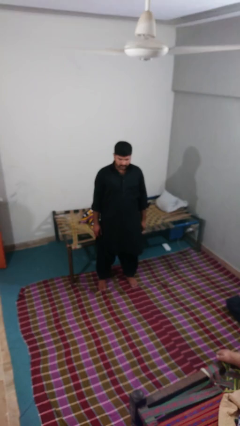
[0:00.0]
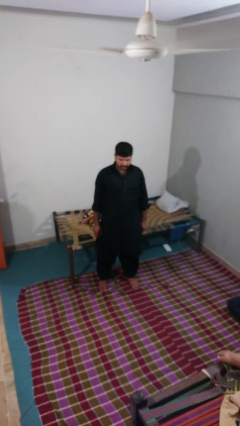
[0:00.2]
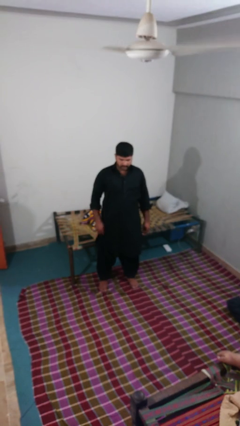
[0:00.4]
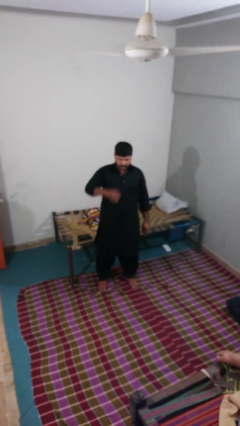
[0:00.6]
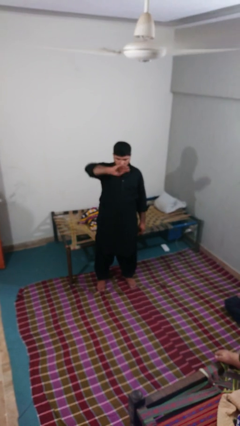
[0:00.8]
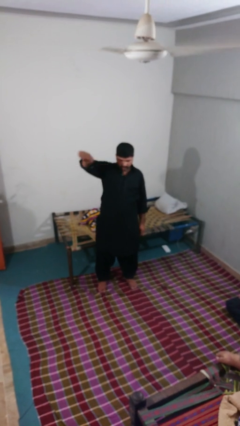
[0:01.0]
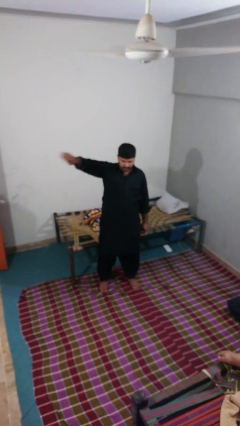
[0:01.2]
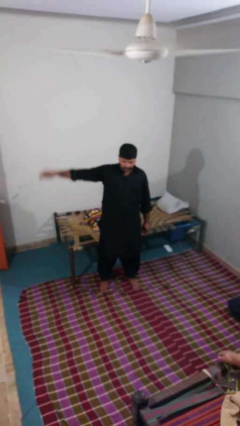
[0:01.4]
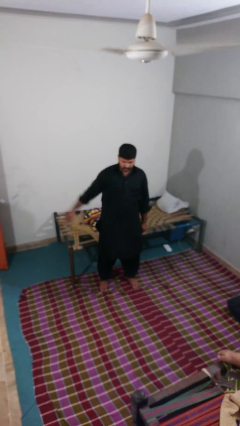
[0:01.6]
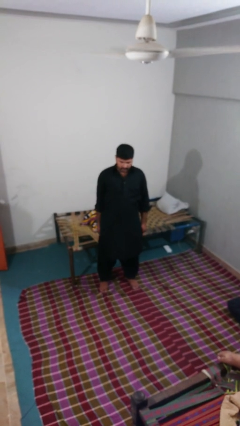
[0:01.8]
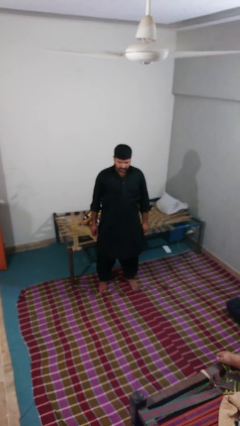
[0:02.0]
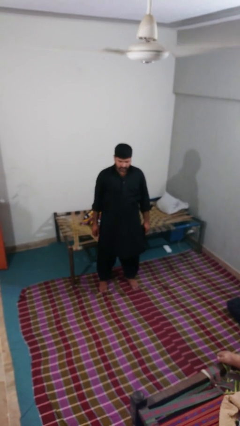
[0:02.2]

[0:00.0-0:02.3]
person gestures swipe right

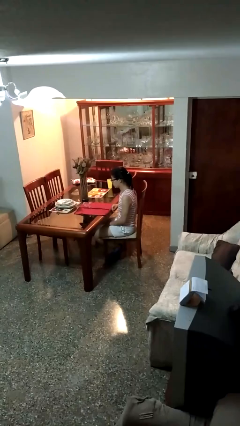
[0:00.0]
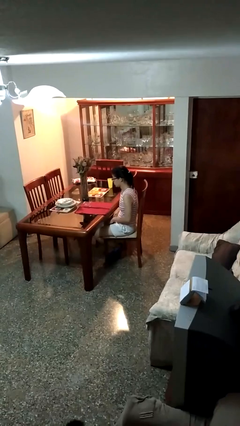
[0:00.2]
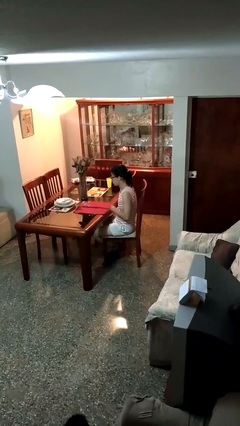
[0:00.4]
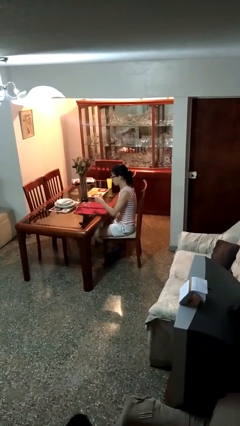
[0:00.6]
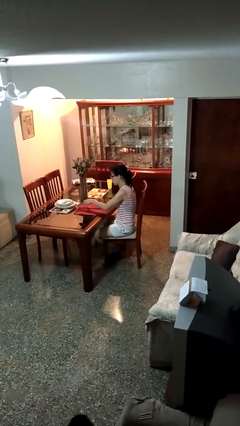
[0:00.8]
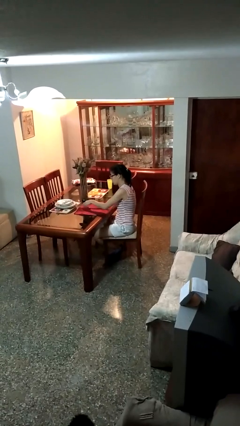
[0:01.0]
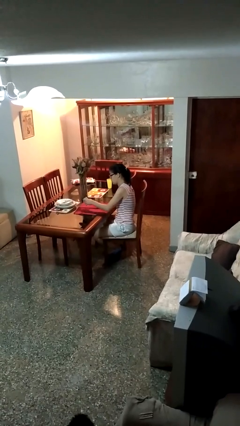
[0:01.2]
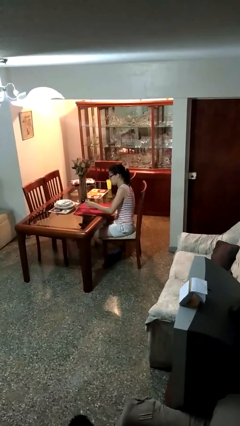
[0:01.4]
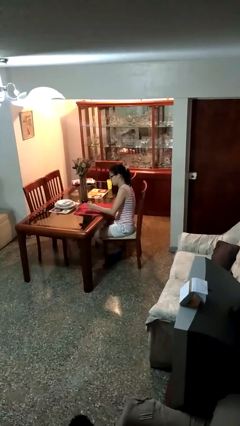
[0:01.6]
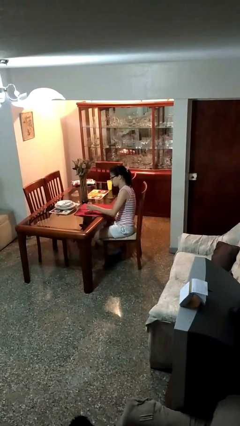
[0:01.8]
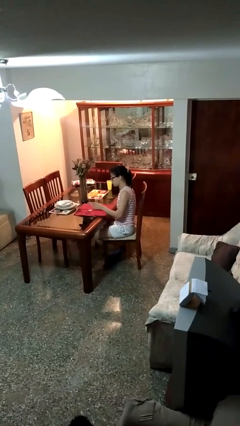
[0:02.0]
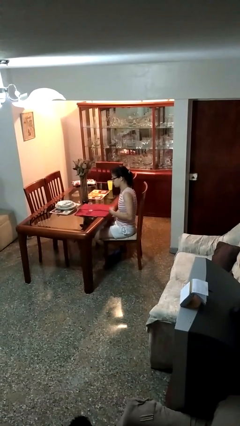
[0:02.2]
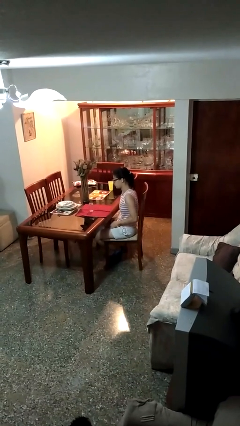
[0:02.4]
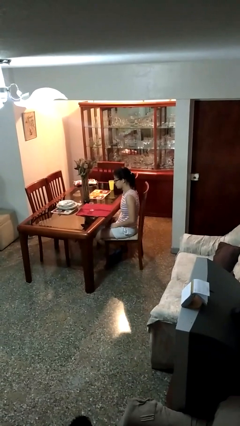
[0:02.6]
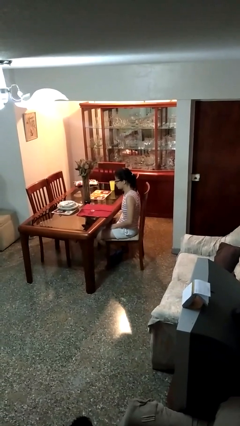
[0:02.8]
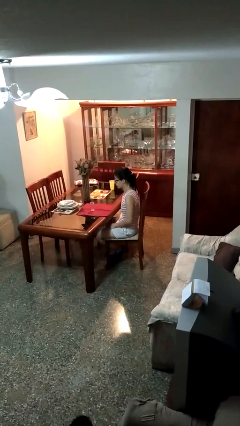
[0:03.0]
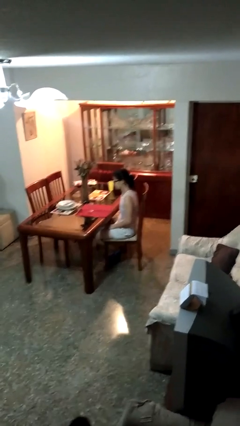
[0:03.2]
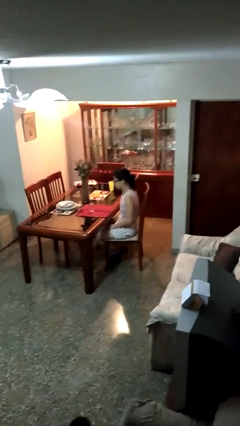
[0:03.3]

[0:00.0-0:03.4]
person sets upright glass

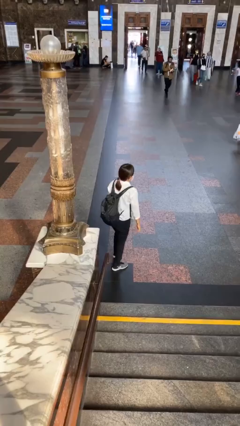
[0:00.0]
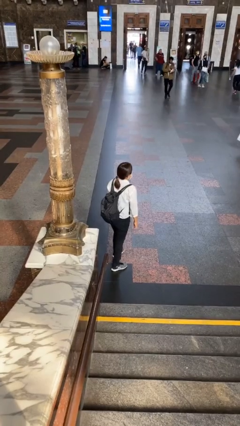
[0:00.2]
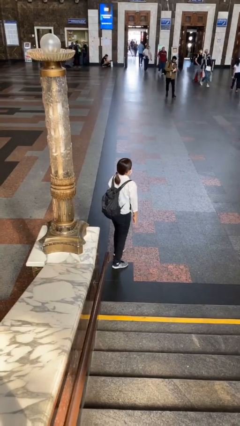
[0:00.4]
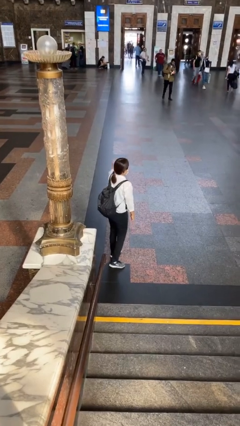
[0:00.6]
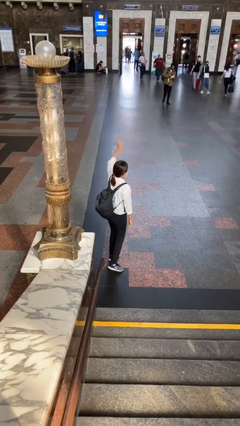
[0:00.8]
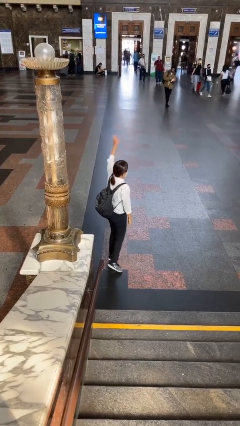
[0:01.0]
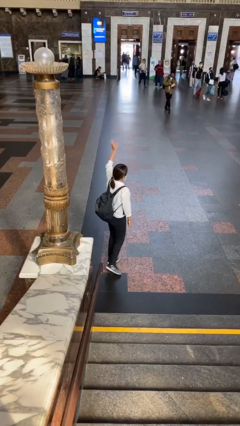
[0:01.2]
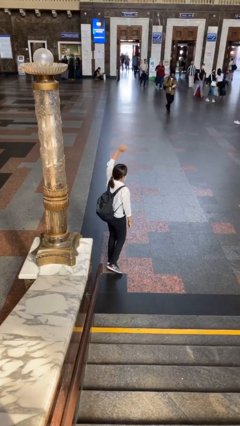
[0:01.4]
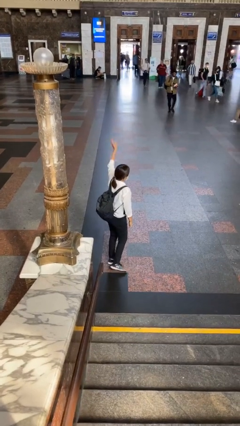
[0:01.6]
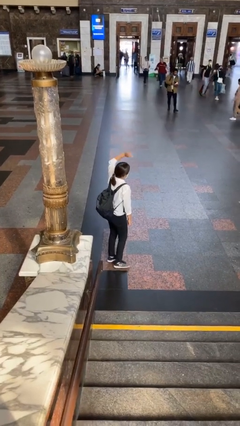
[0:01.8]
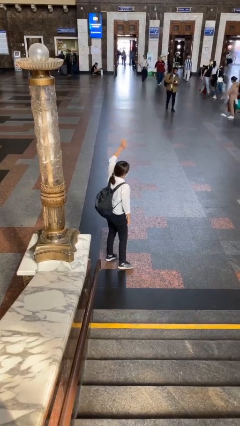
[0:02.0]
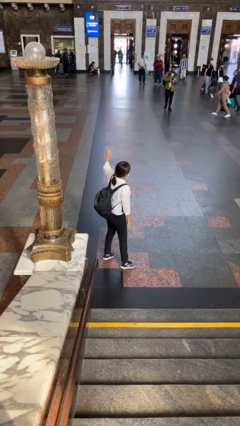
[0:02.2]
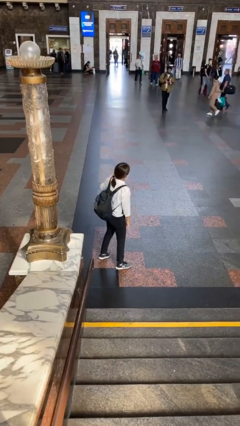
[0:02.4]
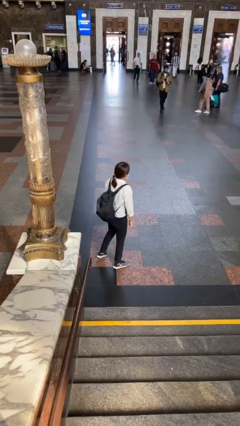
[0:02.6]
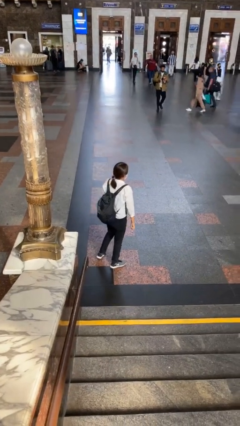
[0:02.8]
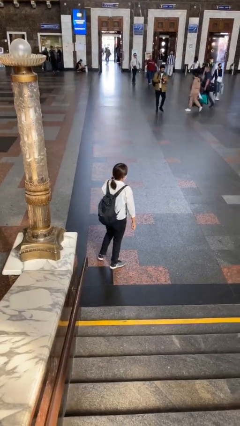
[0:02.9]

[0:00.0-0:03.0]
person waves at person

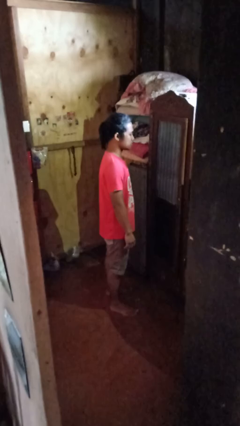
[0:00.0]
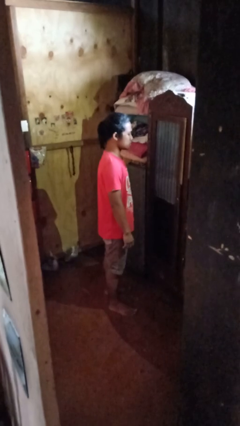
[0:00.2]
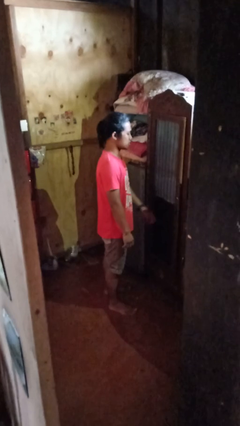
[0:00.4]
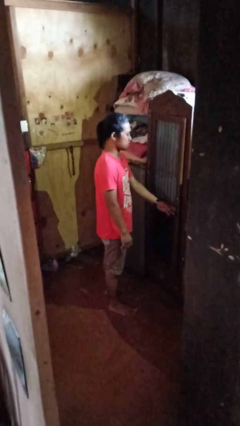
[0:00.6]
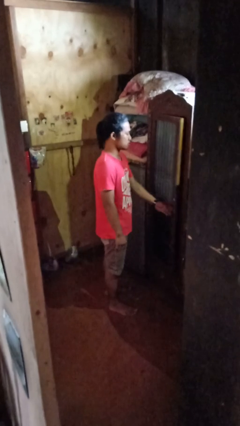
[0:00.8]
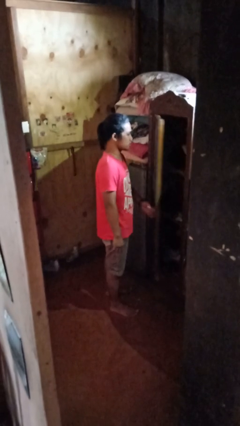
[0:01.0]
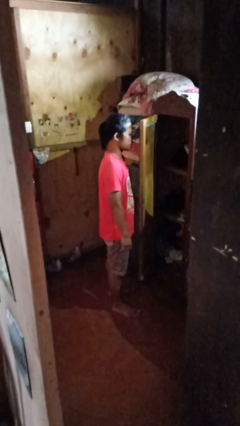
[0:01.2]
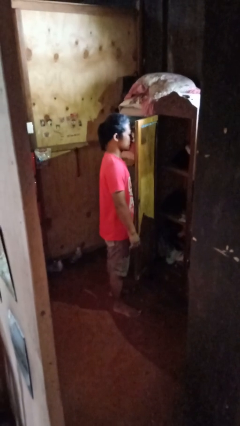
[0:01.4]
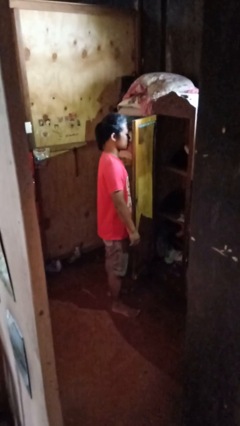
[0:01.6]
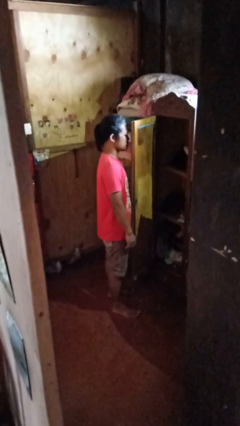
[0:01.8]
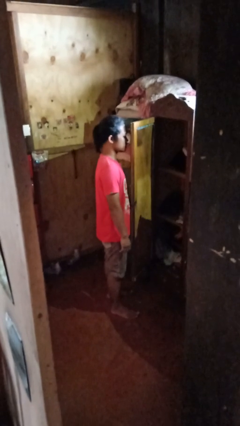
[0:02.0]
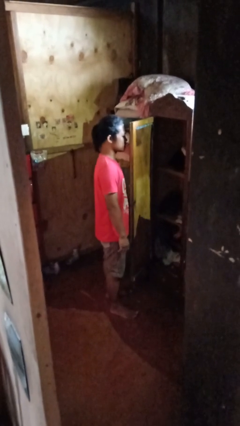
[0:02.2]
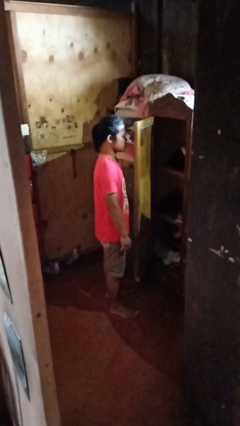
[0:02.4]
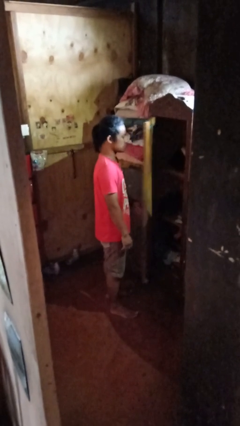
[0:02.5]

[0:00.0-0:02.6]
person opens closet door

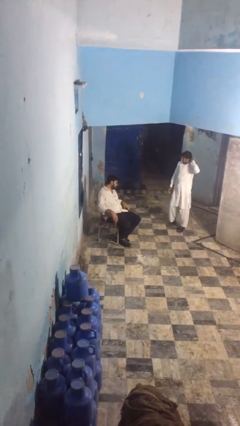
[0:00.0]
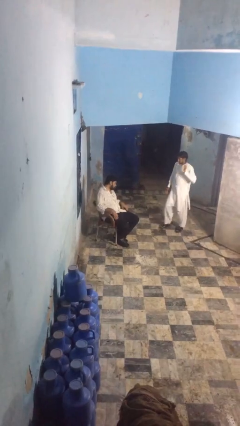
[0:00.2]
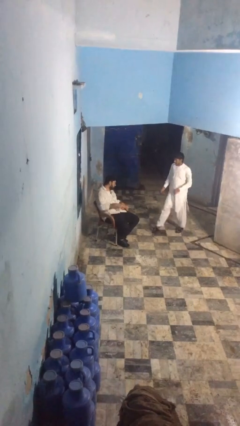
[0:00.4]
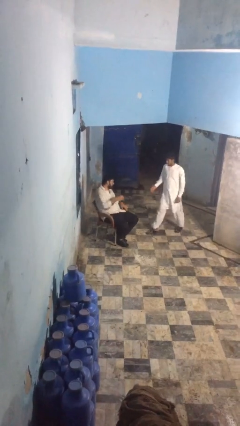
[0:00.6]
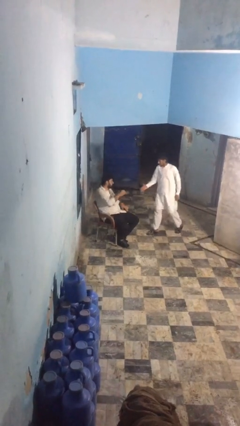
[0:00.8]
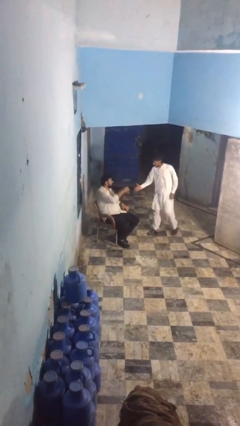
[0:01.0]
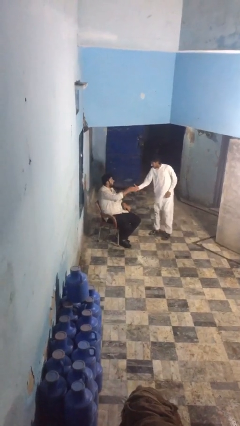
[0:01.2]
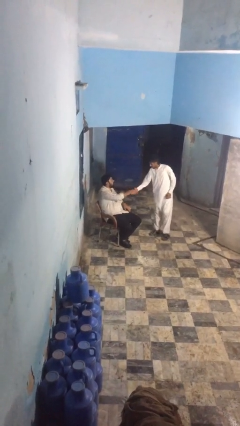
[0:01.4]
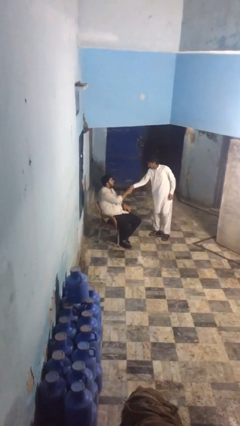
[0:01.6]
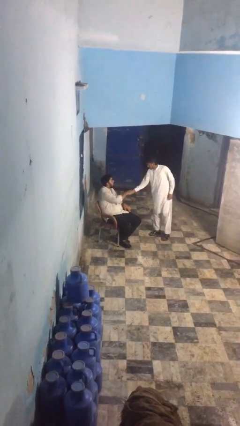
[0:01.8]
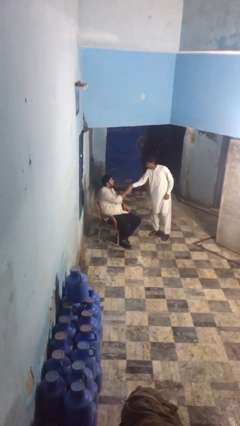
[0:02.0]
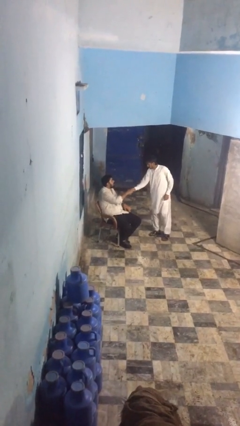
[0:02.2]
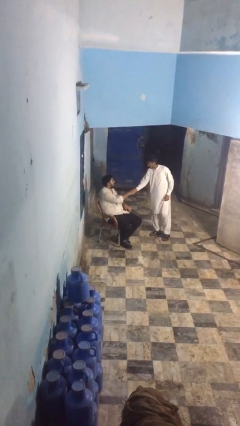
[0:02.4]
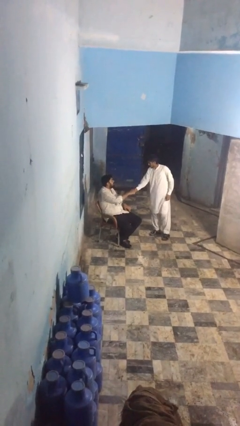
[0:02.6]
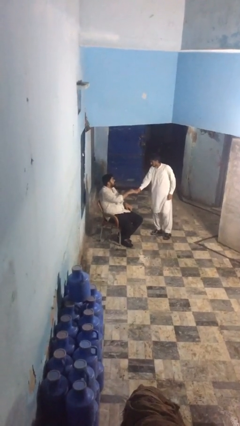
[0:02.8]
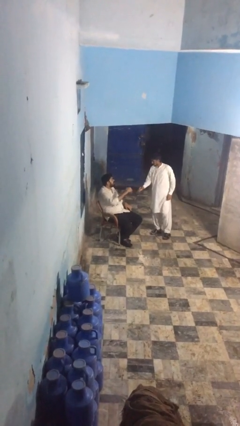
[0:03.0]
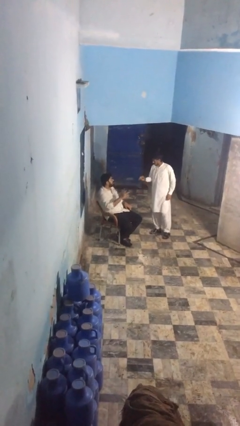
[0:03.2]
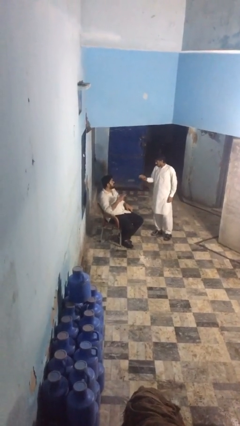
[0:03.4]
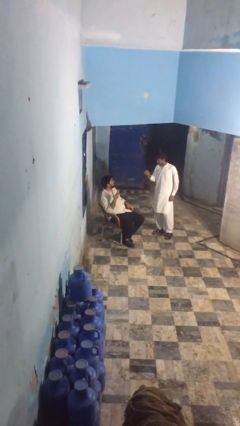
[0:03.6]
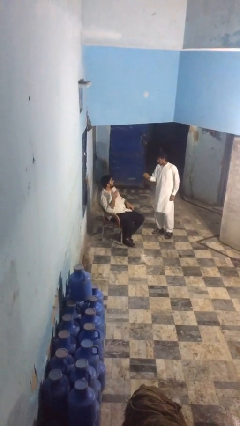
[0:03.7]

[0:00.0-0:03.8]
person shakes hand

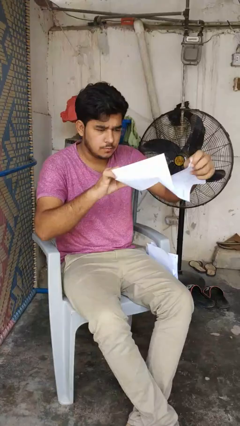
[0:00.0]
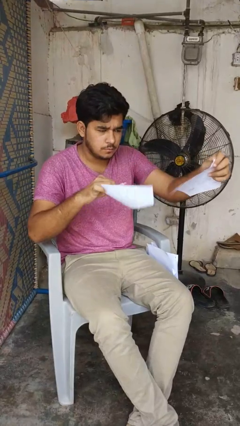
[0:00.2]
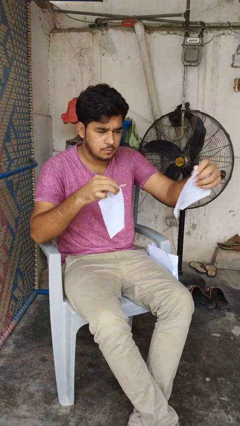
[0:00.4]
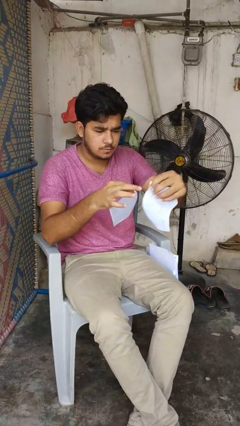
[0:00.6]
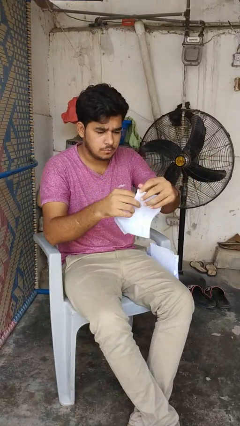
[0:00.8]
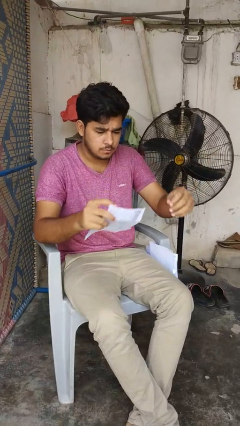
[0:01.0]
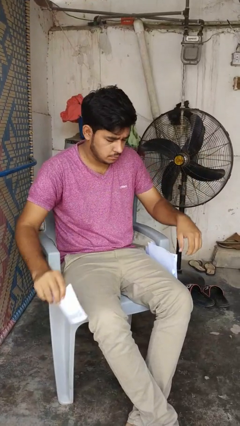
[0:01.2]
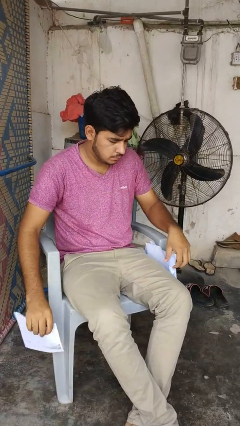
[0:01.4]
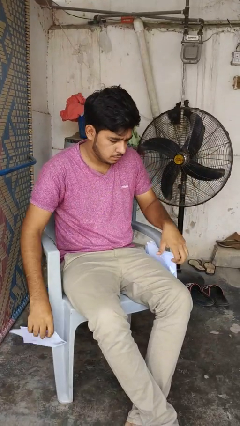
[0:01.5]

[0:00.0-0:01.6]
person tears paper
